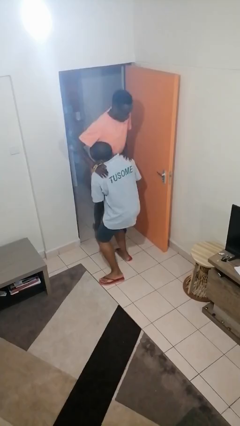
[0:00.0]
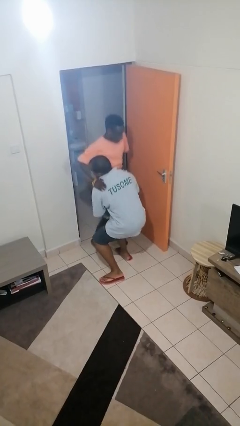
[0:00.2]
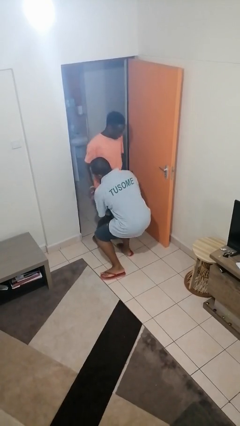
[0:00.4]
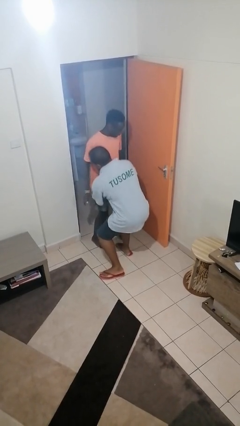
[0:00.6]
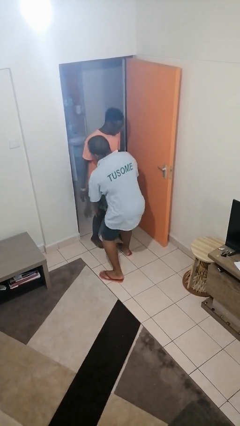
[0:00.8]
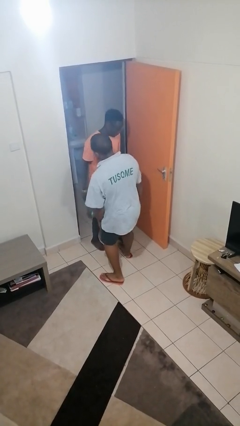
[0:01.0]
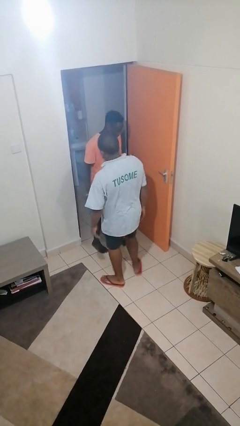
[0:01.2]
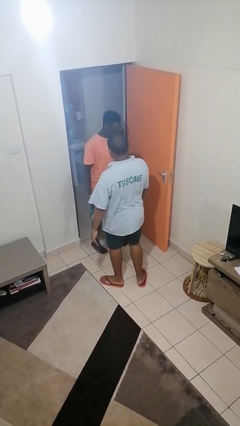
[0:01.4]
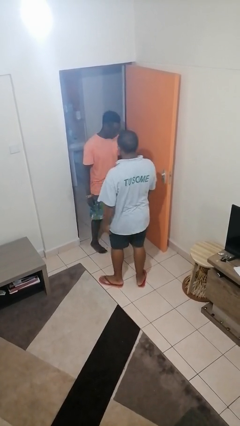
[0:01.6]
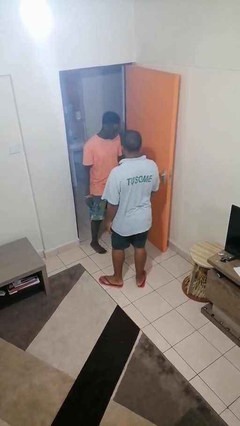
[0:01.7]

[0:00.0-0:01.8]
person puts down person

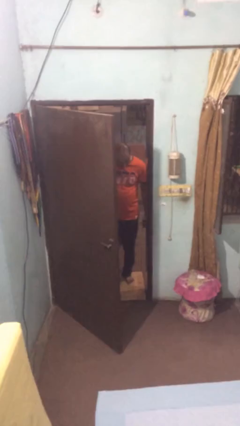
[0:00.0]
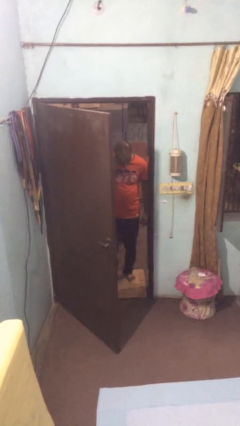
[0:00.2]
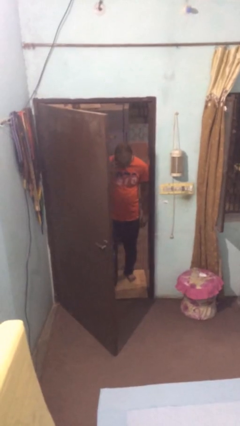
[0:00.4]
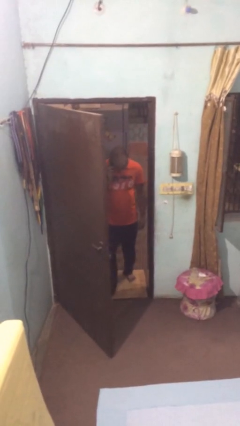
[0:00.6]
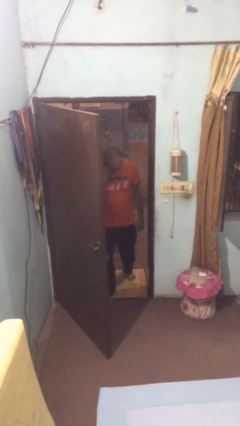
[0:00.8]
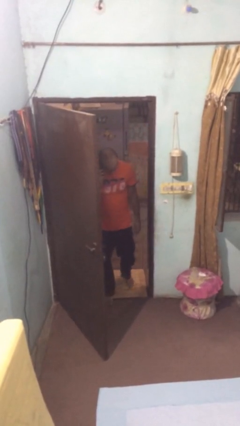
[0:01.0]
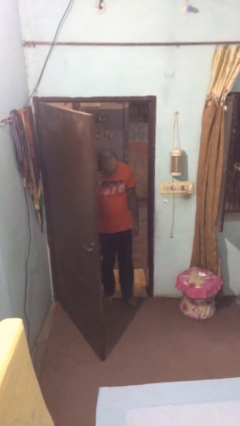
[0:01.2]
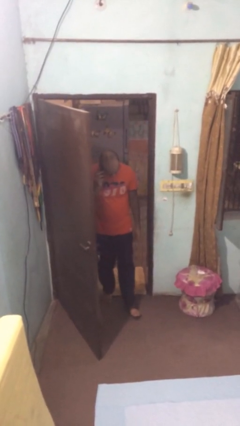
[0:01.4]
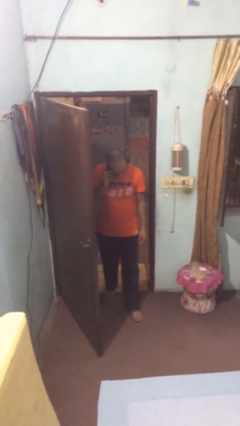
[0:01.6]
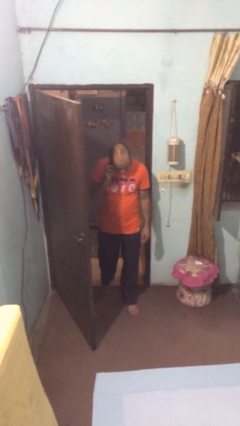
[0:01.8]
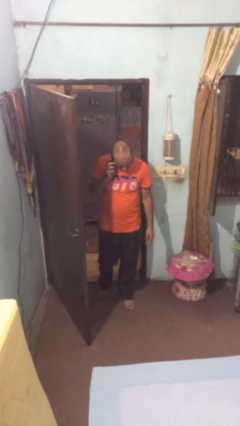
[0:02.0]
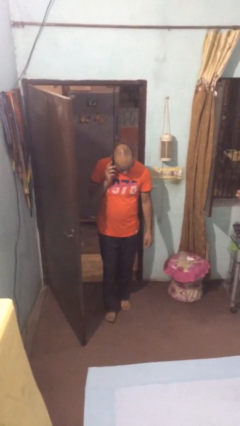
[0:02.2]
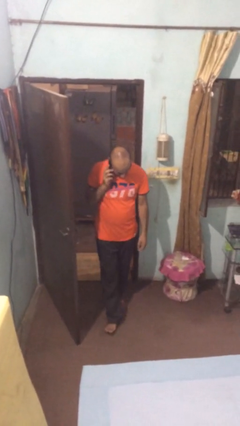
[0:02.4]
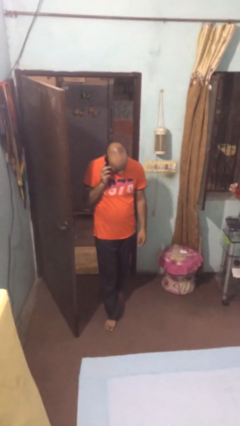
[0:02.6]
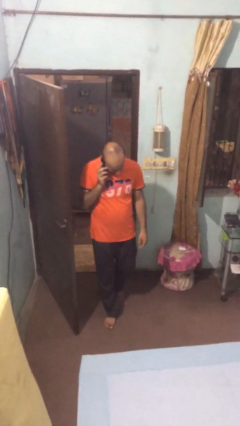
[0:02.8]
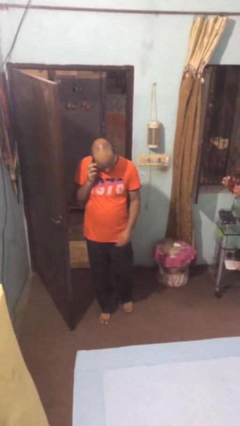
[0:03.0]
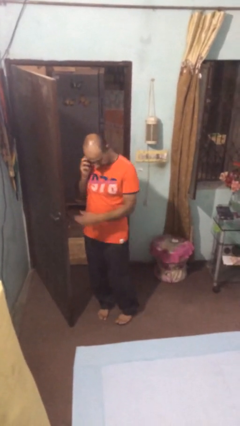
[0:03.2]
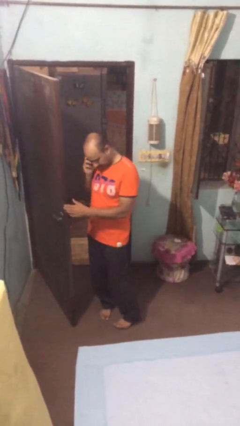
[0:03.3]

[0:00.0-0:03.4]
person enters scene through structure

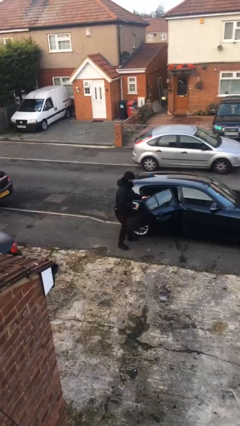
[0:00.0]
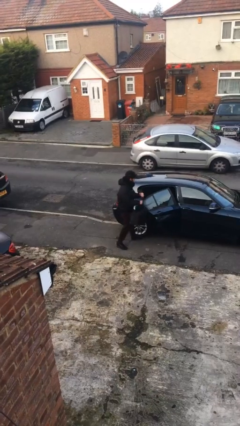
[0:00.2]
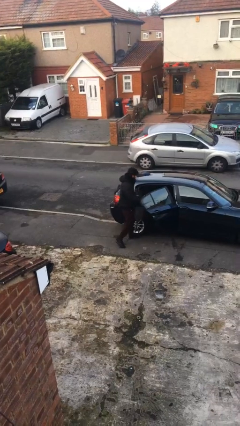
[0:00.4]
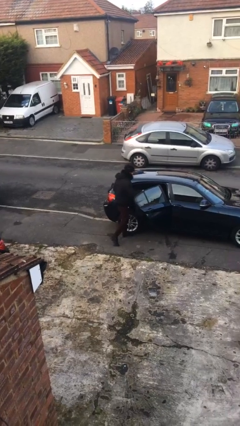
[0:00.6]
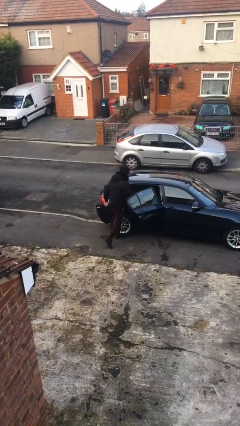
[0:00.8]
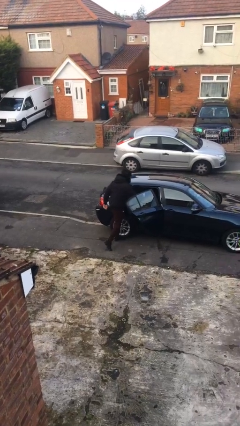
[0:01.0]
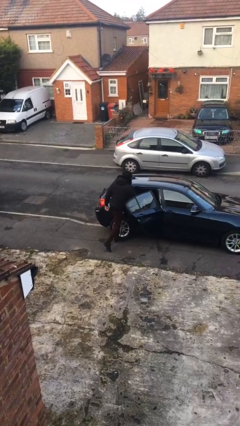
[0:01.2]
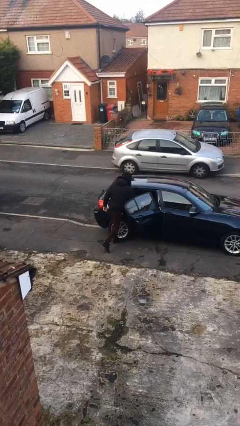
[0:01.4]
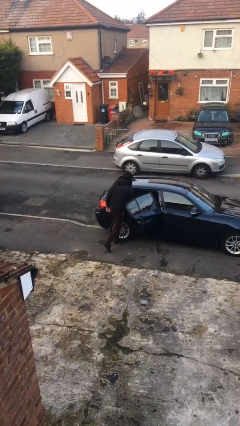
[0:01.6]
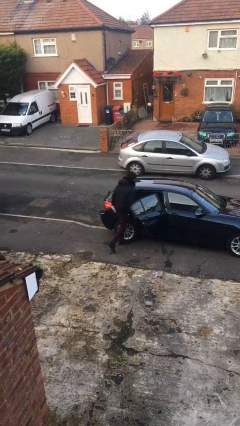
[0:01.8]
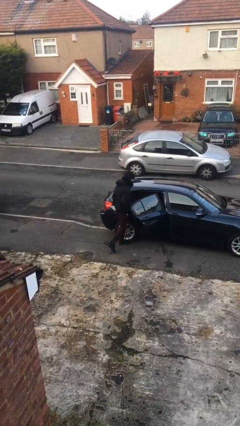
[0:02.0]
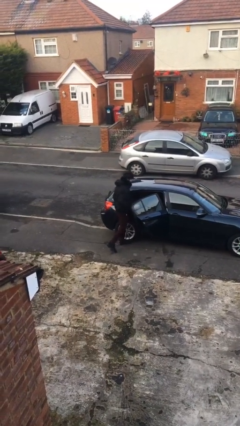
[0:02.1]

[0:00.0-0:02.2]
person loads car

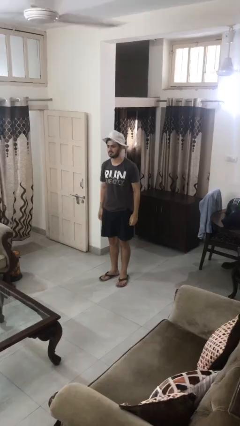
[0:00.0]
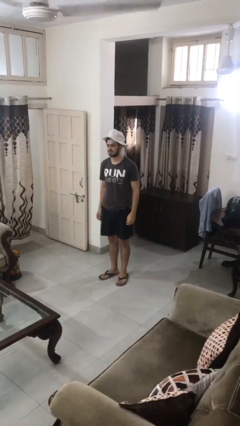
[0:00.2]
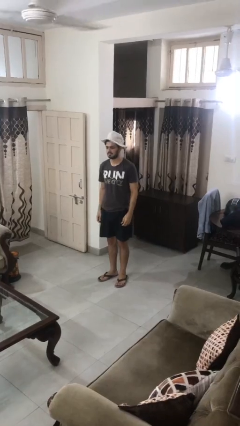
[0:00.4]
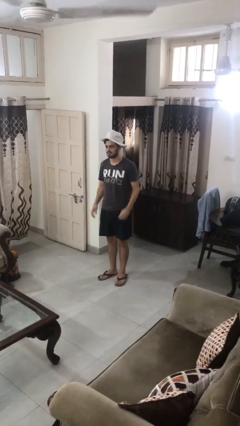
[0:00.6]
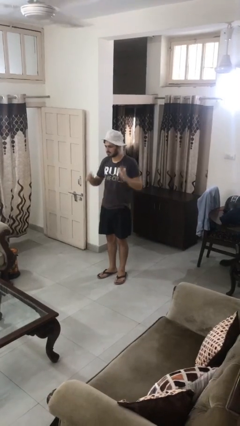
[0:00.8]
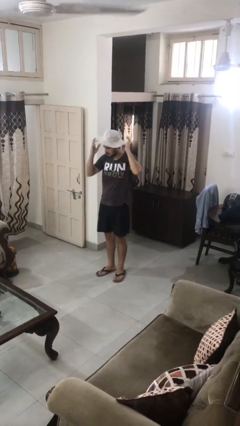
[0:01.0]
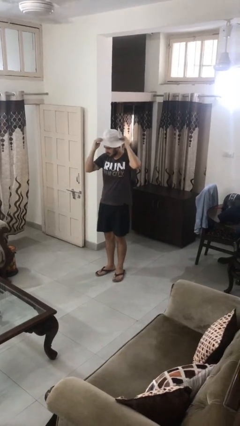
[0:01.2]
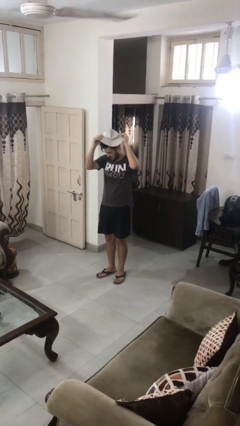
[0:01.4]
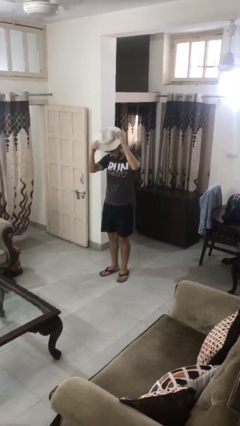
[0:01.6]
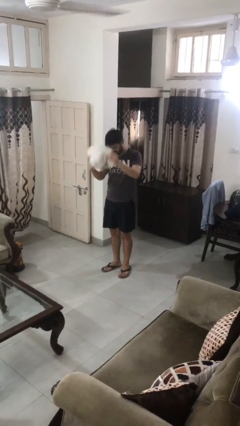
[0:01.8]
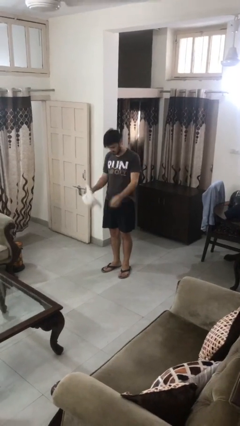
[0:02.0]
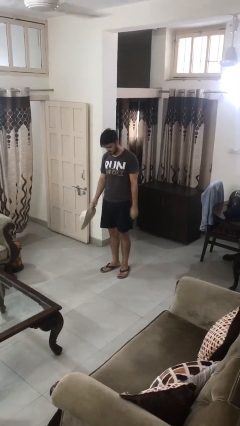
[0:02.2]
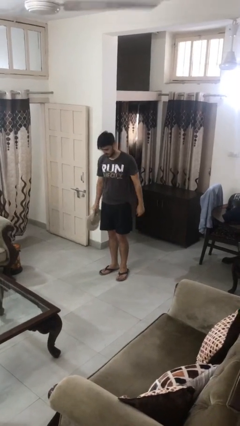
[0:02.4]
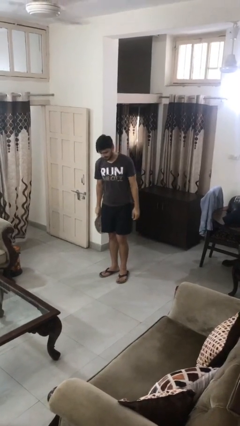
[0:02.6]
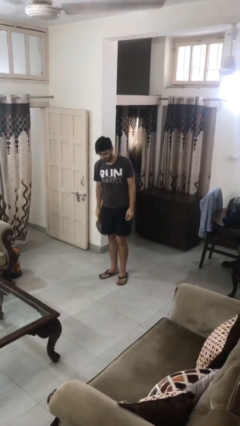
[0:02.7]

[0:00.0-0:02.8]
person takes off hat

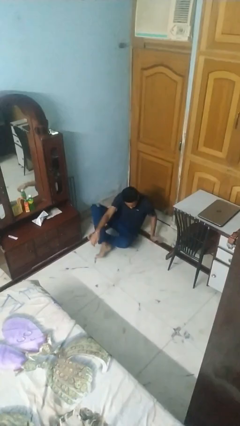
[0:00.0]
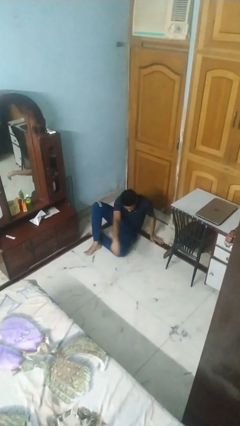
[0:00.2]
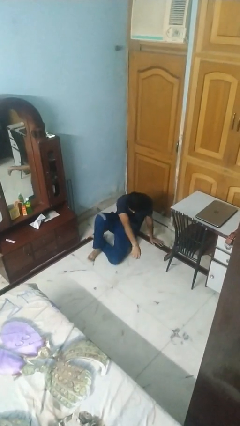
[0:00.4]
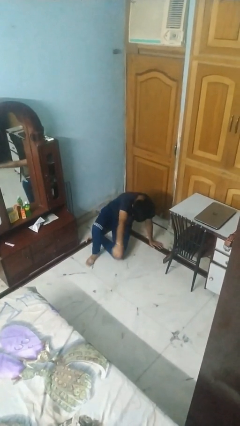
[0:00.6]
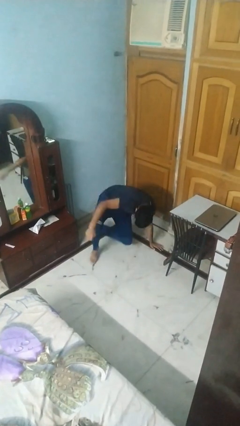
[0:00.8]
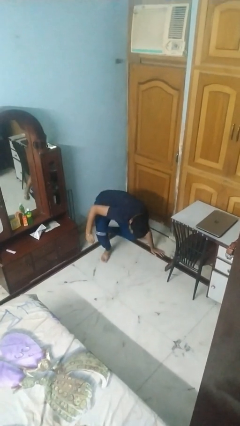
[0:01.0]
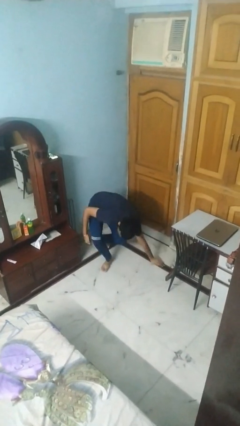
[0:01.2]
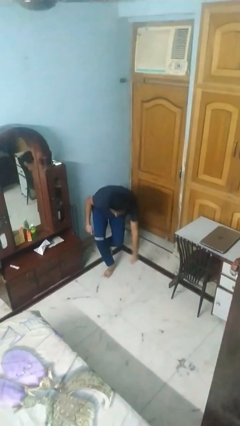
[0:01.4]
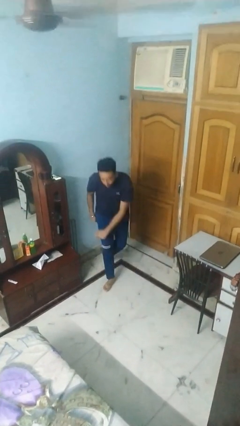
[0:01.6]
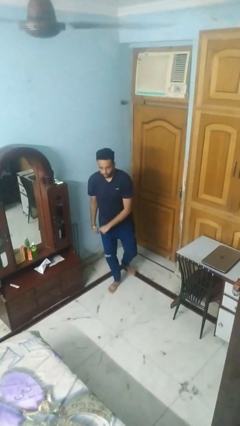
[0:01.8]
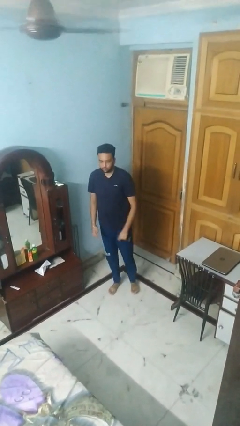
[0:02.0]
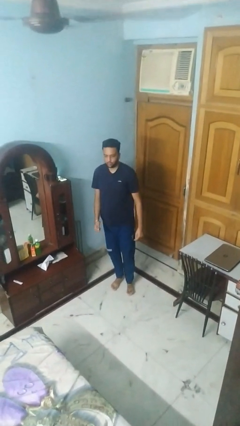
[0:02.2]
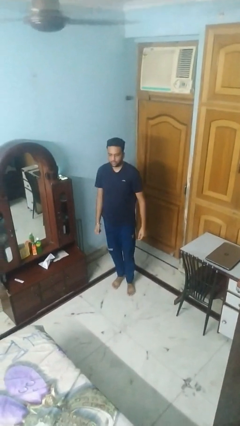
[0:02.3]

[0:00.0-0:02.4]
person stands up from floor

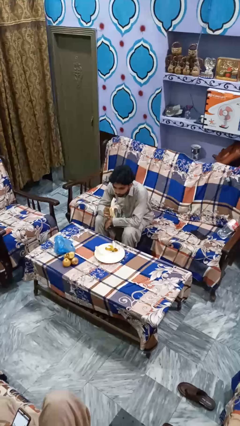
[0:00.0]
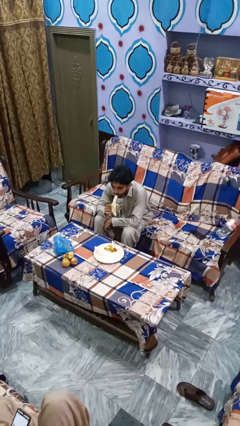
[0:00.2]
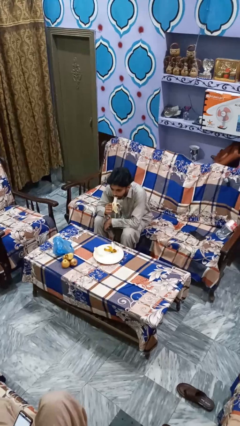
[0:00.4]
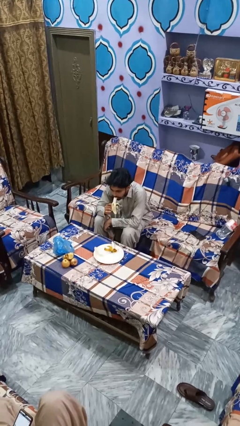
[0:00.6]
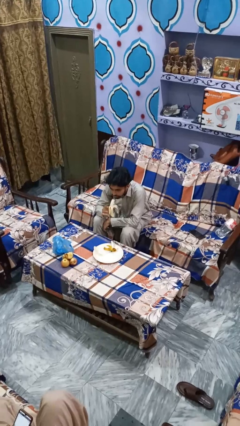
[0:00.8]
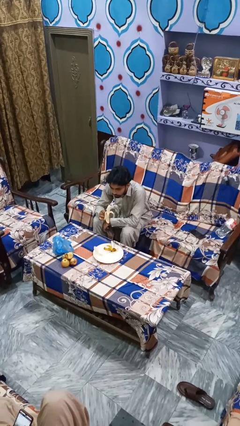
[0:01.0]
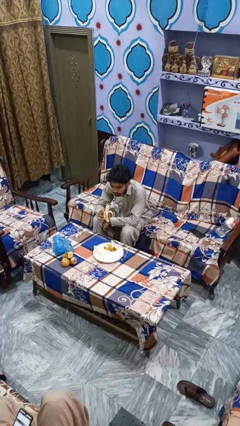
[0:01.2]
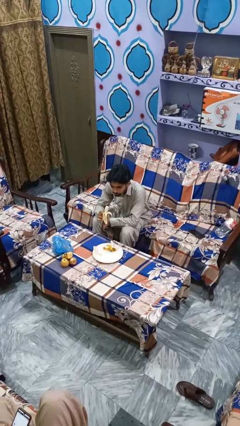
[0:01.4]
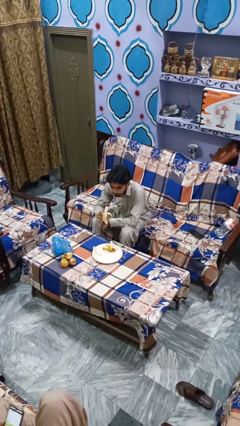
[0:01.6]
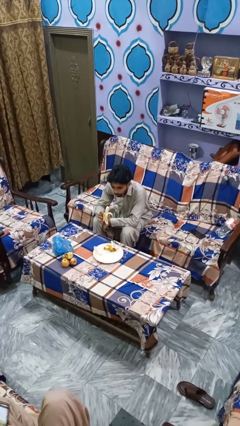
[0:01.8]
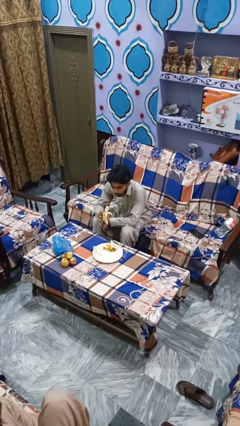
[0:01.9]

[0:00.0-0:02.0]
person eats banana

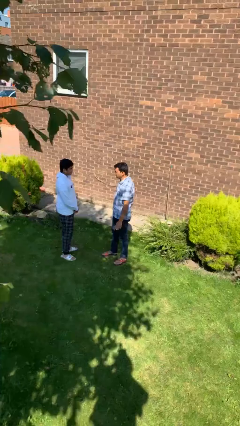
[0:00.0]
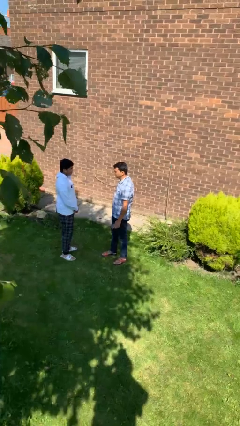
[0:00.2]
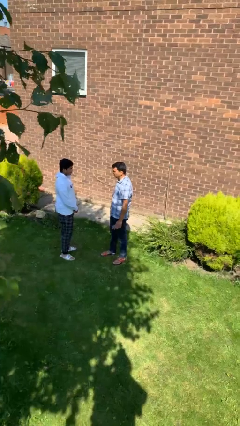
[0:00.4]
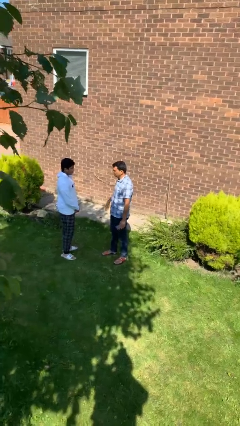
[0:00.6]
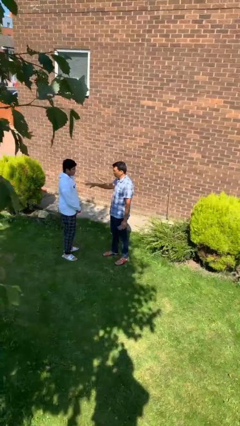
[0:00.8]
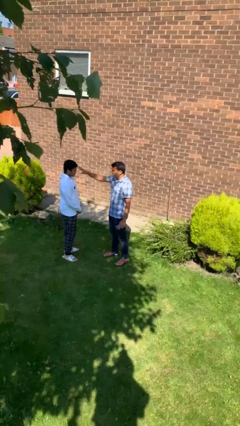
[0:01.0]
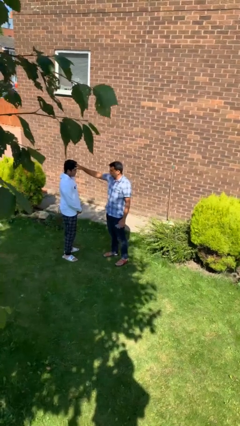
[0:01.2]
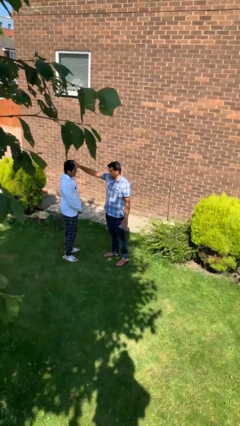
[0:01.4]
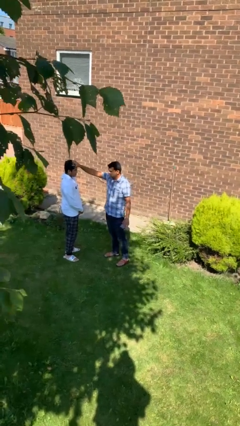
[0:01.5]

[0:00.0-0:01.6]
person grabs person by hair

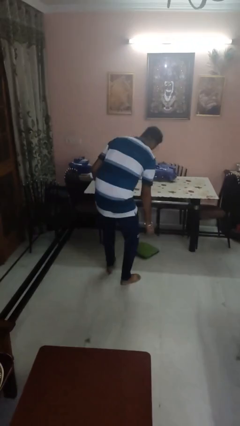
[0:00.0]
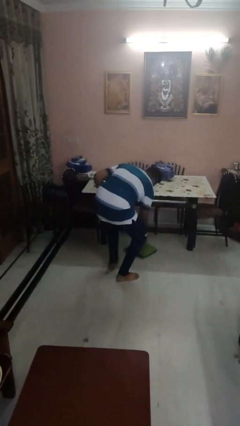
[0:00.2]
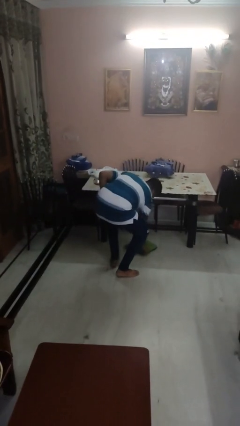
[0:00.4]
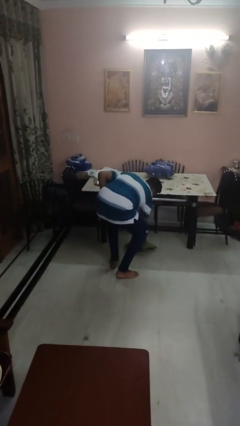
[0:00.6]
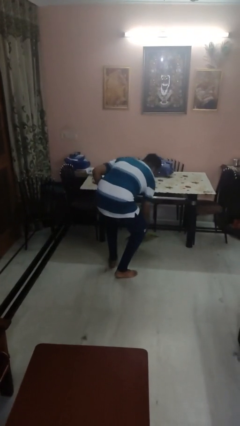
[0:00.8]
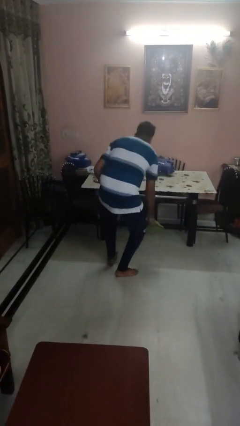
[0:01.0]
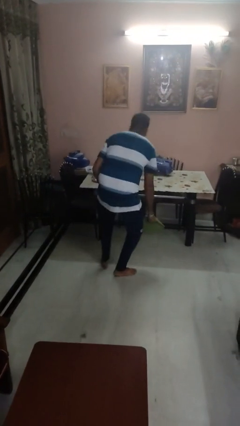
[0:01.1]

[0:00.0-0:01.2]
person picks up object from floor
